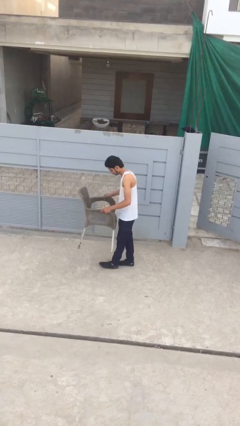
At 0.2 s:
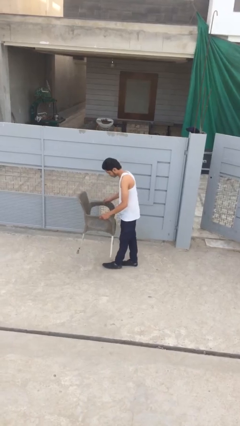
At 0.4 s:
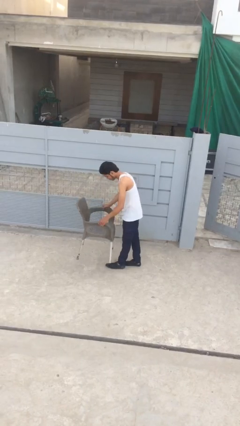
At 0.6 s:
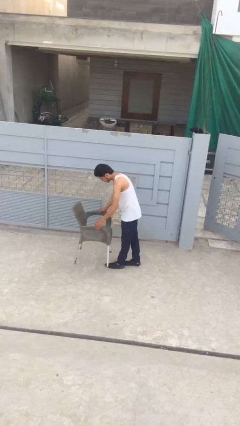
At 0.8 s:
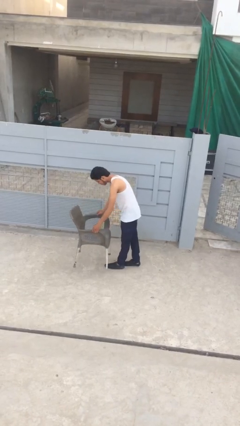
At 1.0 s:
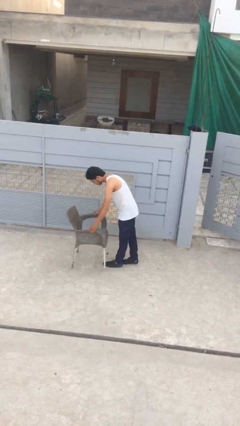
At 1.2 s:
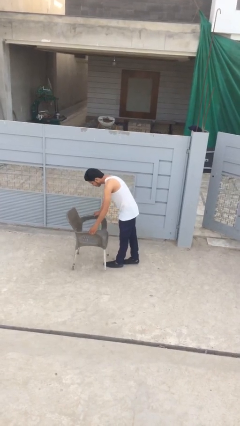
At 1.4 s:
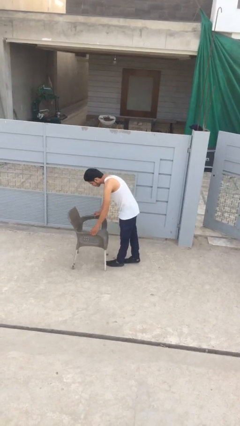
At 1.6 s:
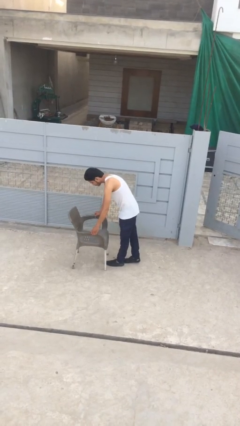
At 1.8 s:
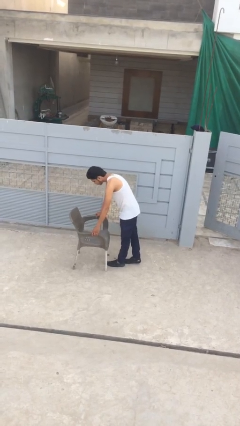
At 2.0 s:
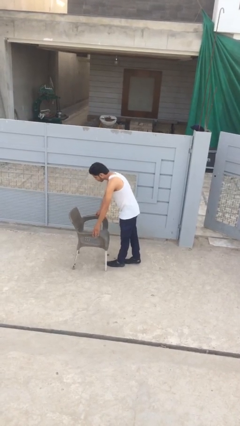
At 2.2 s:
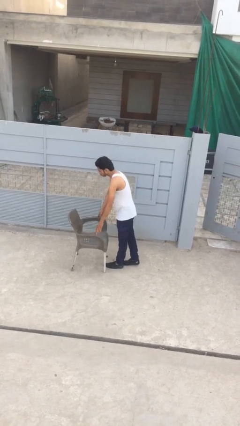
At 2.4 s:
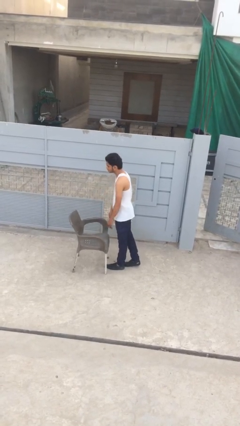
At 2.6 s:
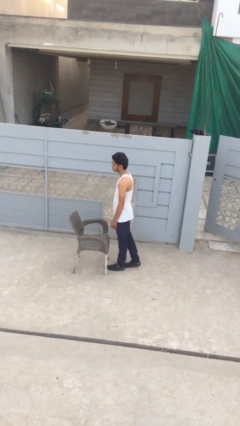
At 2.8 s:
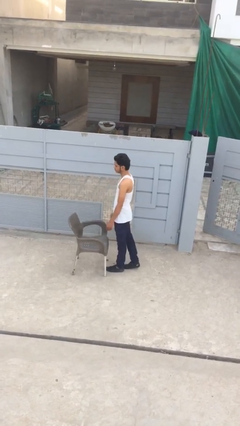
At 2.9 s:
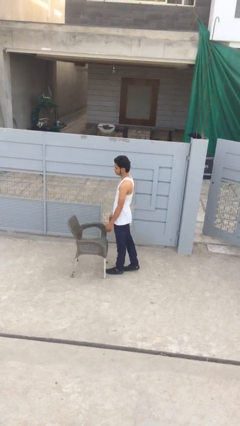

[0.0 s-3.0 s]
person puts down object on floor

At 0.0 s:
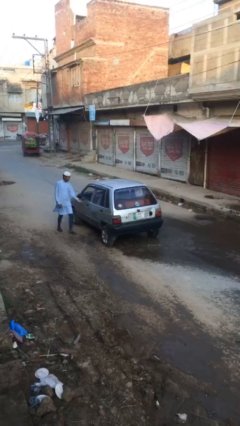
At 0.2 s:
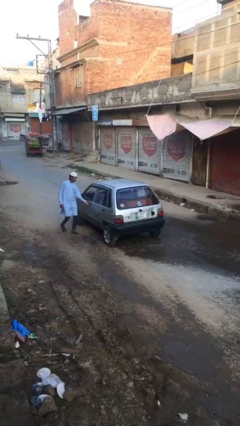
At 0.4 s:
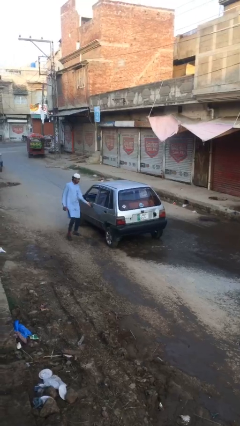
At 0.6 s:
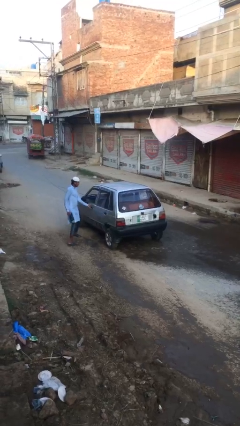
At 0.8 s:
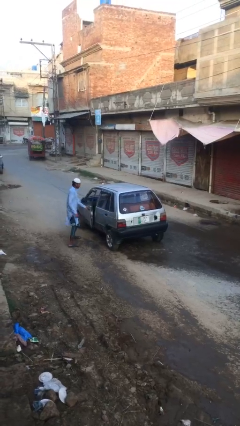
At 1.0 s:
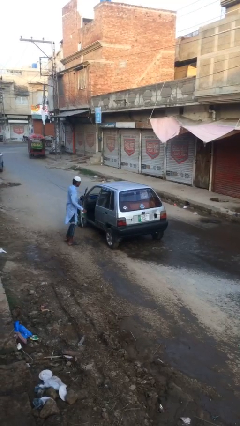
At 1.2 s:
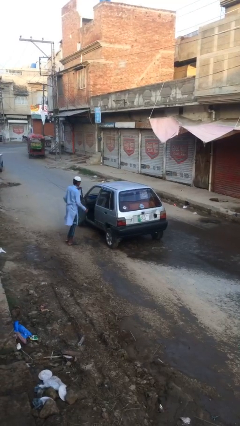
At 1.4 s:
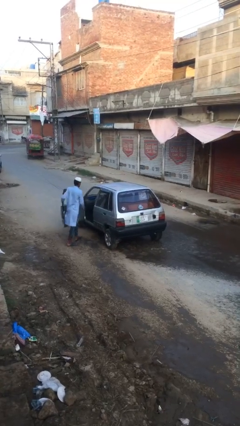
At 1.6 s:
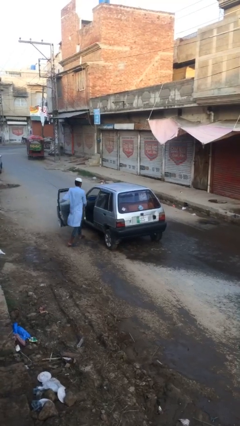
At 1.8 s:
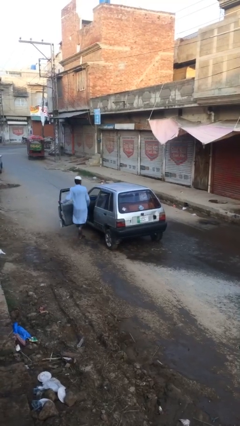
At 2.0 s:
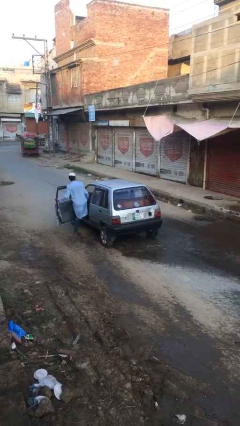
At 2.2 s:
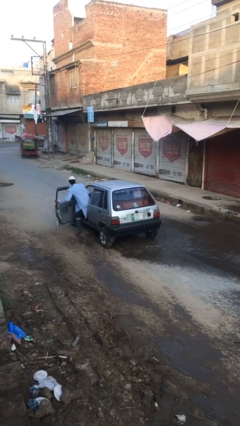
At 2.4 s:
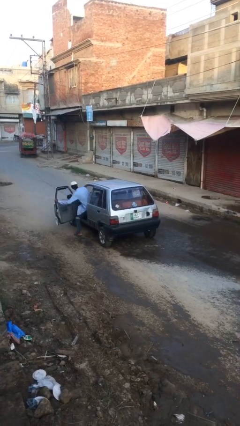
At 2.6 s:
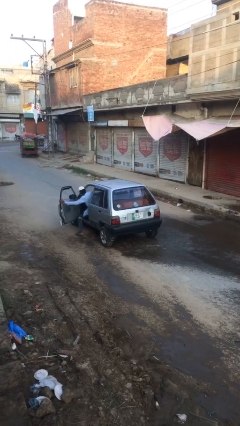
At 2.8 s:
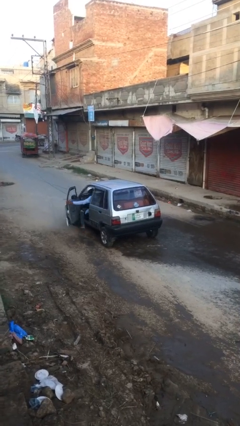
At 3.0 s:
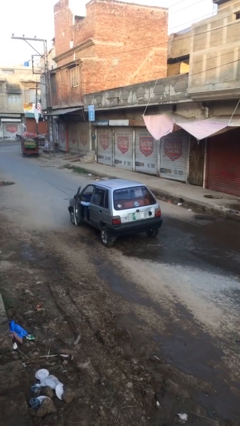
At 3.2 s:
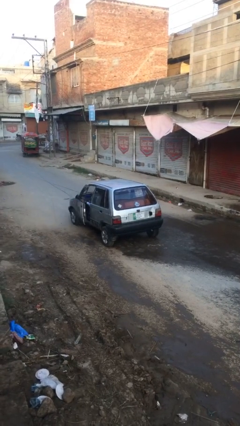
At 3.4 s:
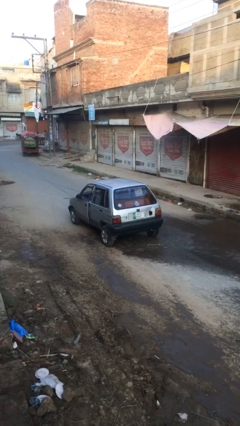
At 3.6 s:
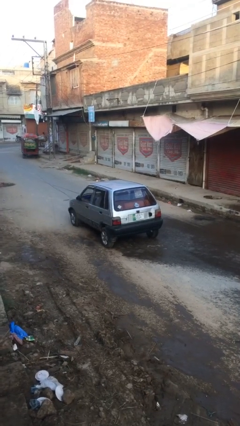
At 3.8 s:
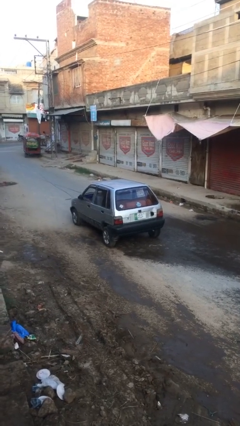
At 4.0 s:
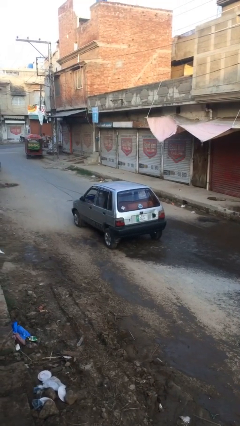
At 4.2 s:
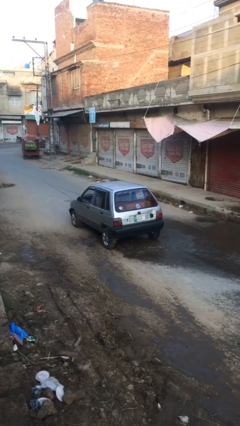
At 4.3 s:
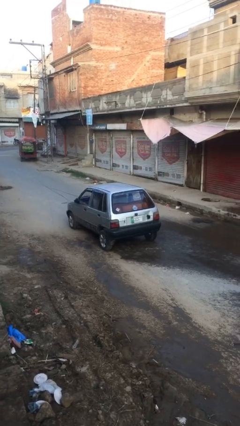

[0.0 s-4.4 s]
car picks up person

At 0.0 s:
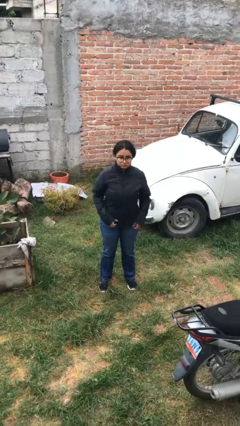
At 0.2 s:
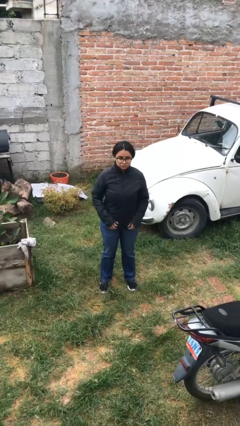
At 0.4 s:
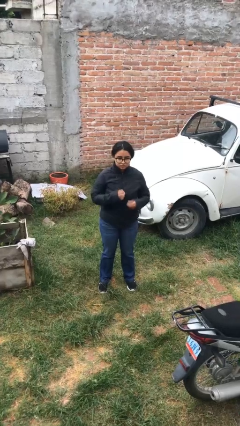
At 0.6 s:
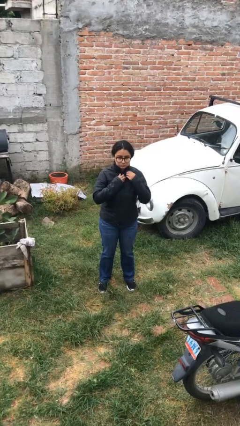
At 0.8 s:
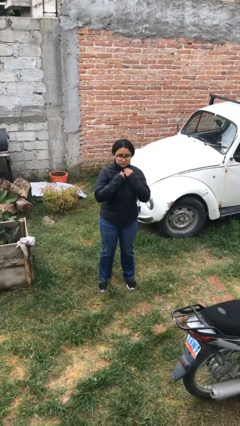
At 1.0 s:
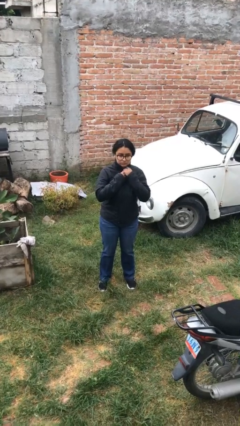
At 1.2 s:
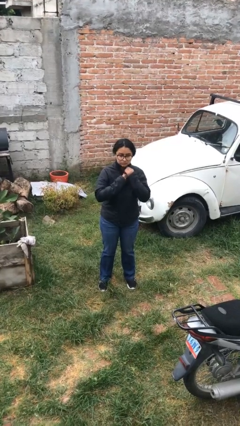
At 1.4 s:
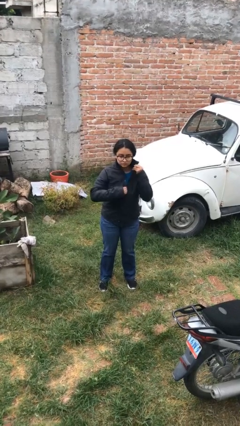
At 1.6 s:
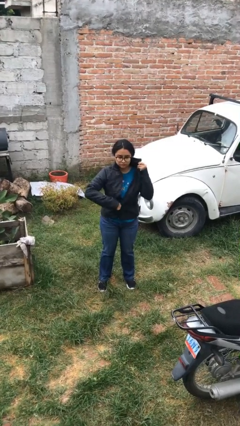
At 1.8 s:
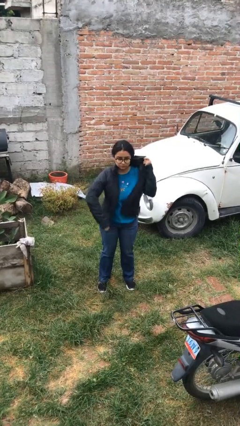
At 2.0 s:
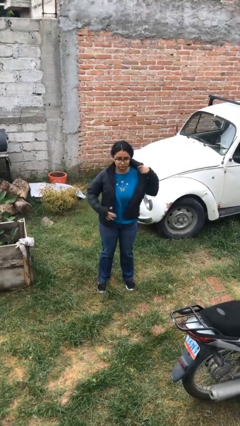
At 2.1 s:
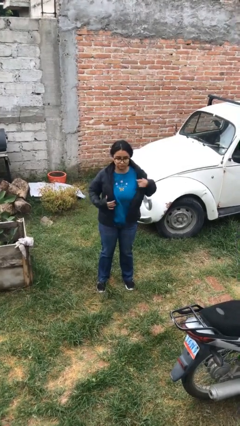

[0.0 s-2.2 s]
person unzips jacket

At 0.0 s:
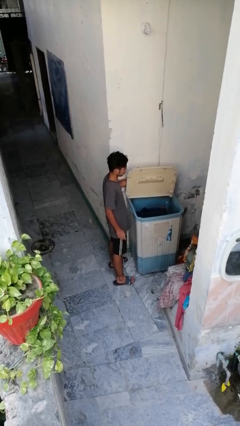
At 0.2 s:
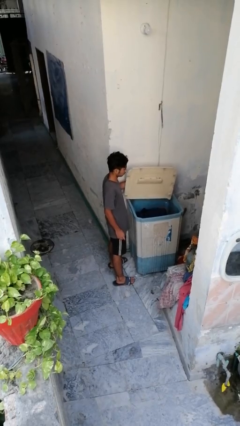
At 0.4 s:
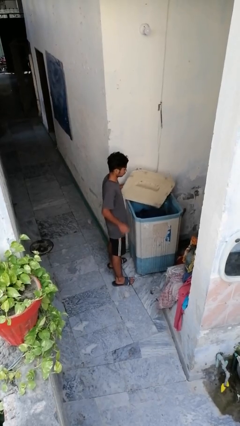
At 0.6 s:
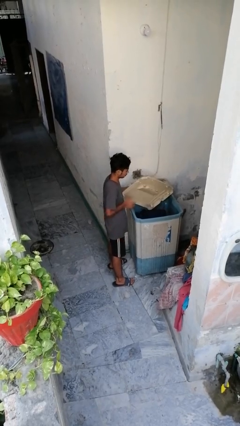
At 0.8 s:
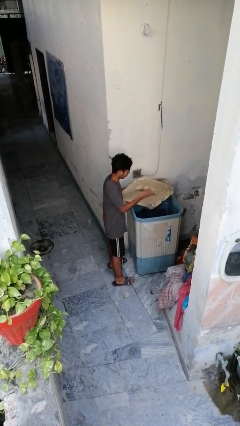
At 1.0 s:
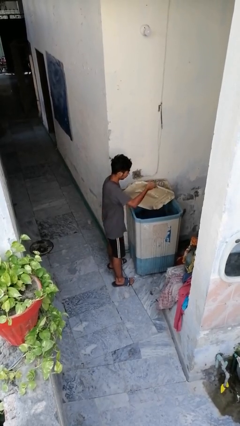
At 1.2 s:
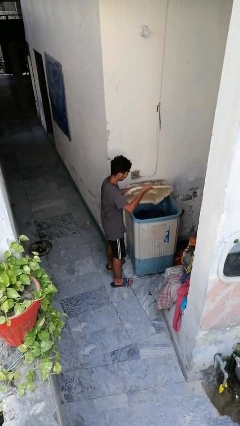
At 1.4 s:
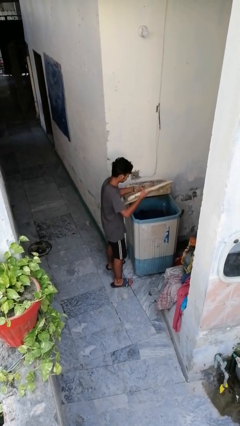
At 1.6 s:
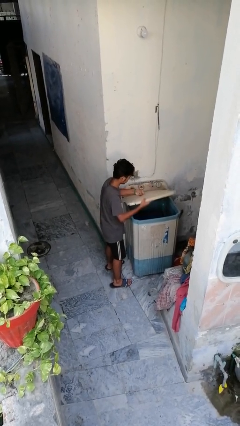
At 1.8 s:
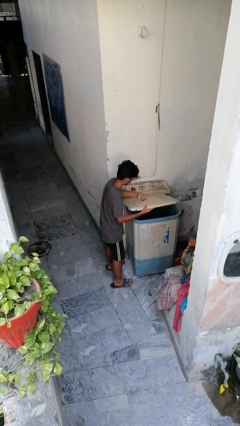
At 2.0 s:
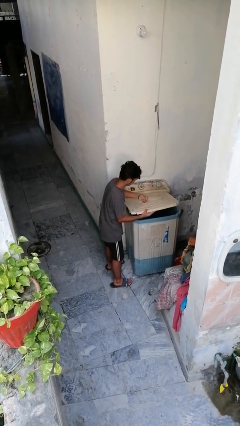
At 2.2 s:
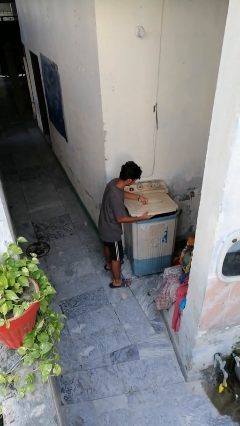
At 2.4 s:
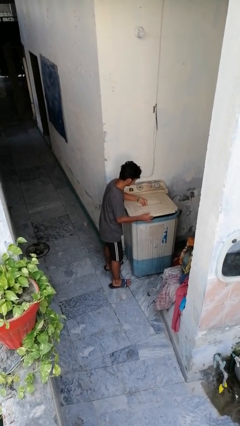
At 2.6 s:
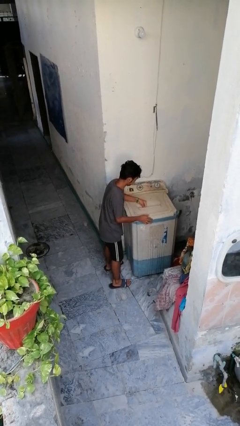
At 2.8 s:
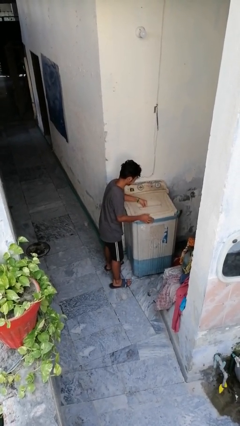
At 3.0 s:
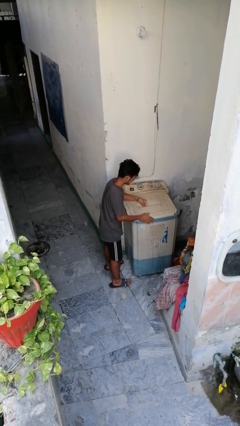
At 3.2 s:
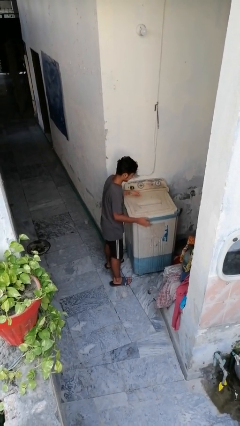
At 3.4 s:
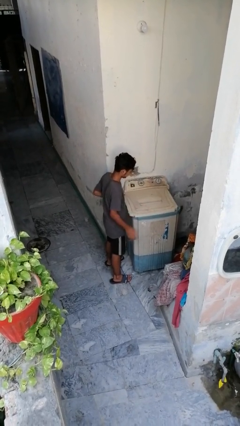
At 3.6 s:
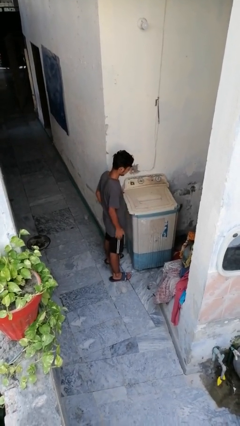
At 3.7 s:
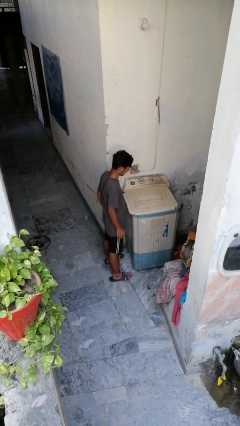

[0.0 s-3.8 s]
person closes clothes washer

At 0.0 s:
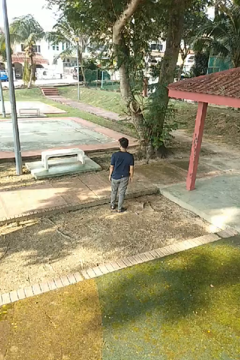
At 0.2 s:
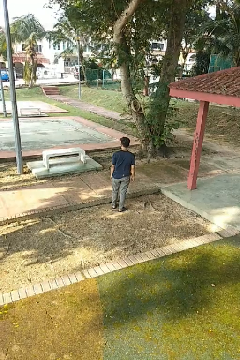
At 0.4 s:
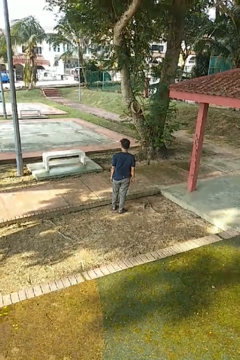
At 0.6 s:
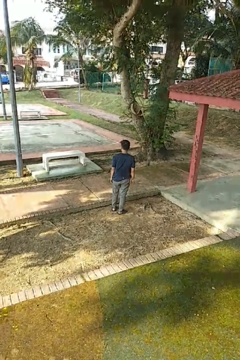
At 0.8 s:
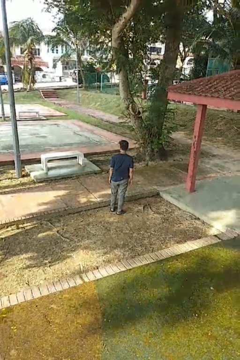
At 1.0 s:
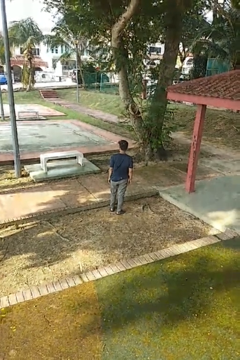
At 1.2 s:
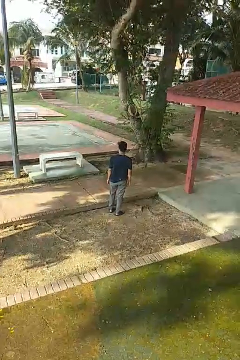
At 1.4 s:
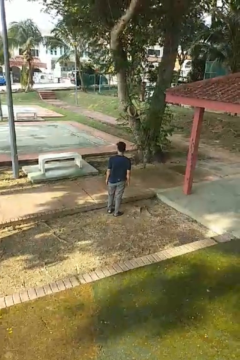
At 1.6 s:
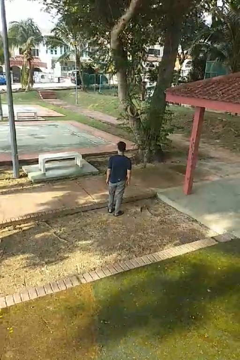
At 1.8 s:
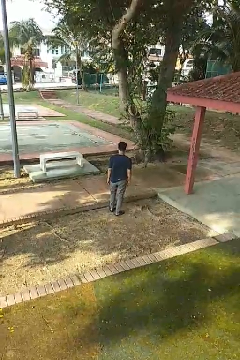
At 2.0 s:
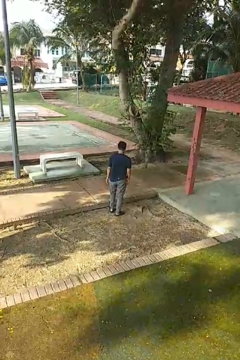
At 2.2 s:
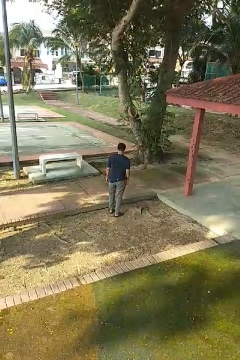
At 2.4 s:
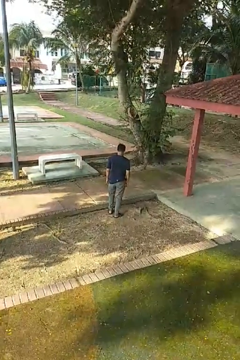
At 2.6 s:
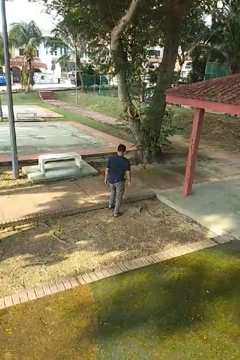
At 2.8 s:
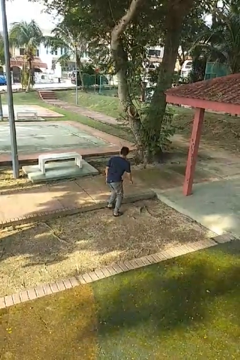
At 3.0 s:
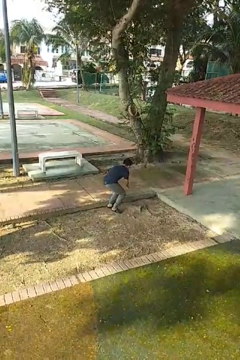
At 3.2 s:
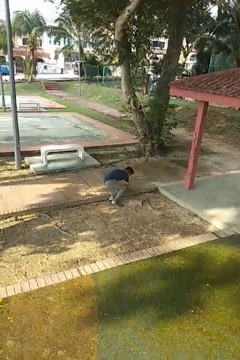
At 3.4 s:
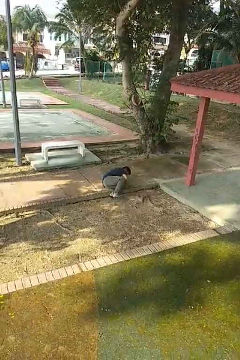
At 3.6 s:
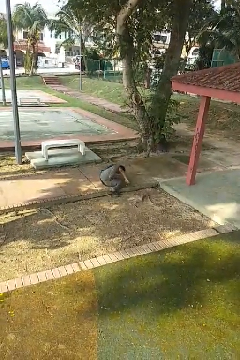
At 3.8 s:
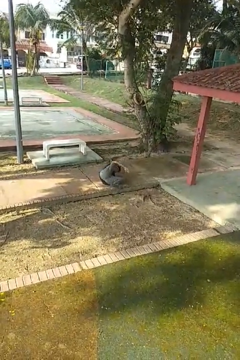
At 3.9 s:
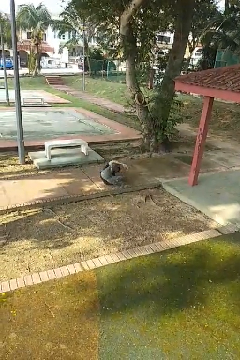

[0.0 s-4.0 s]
person trips on object on floor

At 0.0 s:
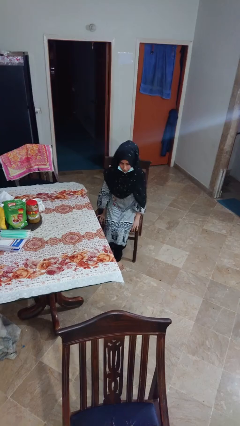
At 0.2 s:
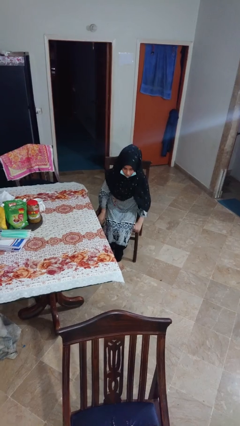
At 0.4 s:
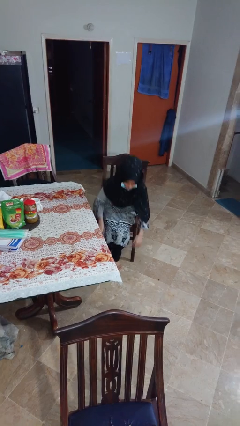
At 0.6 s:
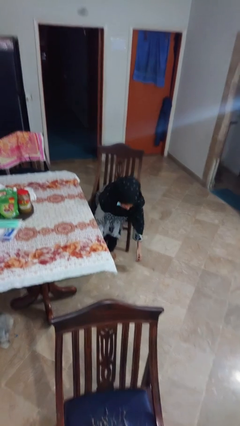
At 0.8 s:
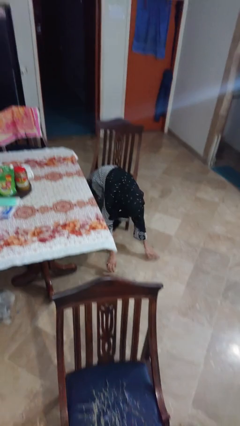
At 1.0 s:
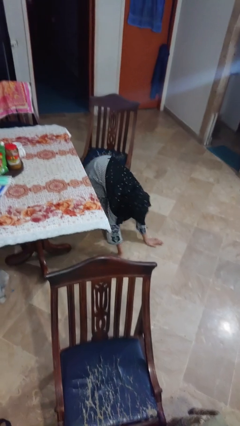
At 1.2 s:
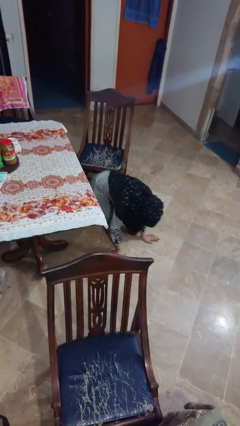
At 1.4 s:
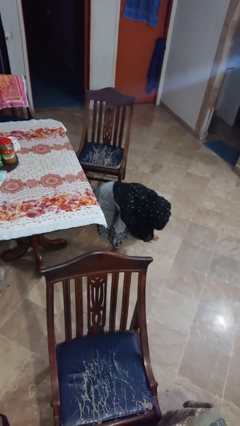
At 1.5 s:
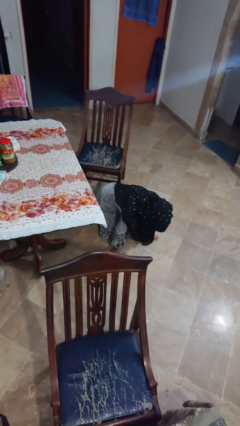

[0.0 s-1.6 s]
person falls from chair
